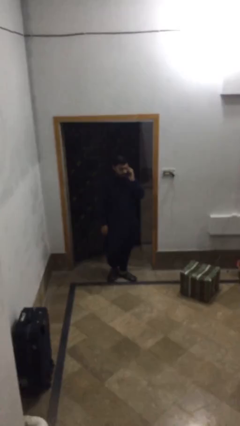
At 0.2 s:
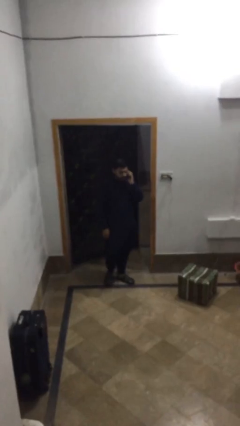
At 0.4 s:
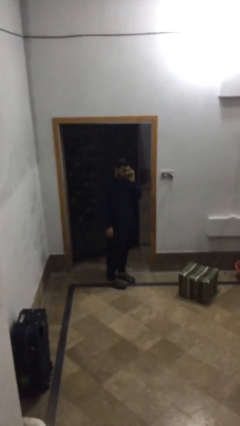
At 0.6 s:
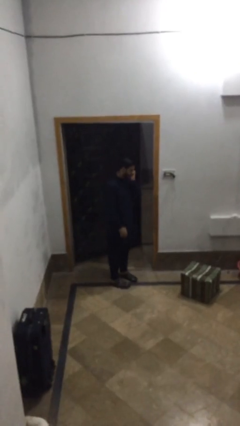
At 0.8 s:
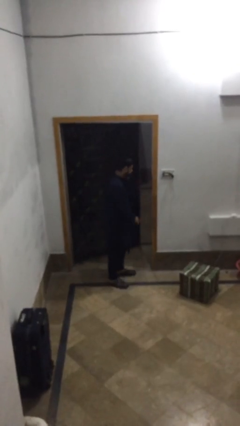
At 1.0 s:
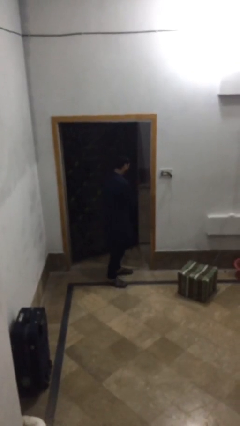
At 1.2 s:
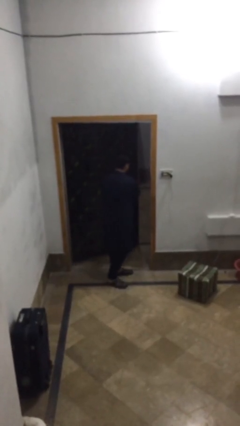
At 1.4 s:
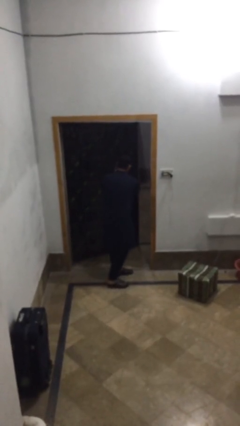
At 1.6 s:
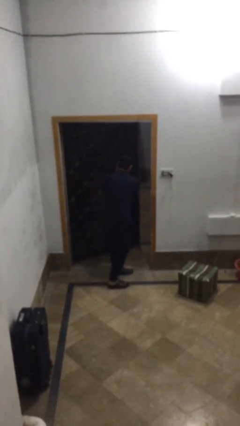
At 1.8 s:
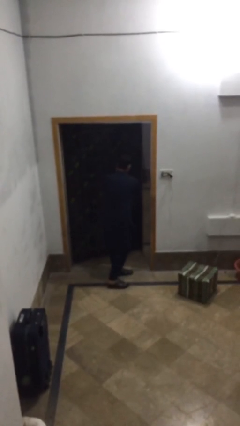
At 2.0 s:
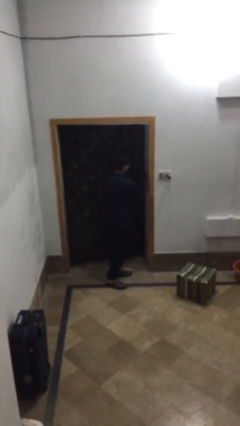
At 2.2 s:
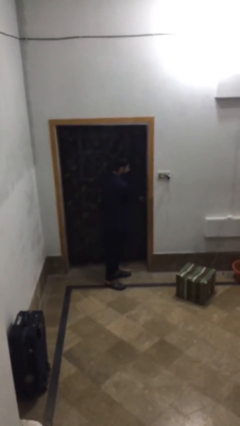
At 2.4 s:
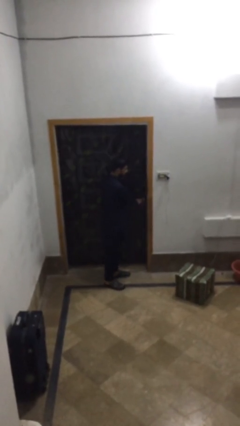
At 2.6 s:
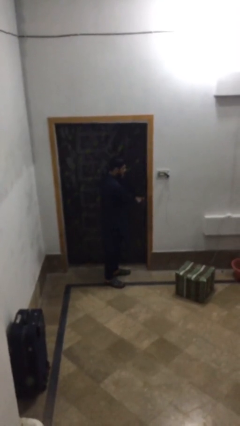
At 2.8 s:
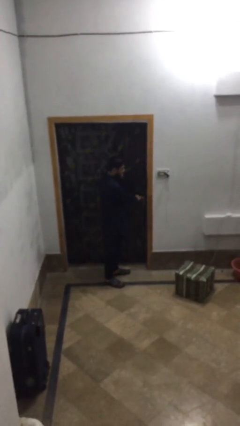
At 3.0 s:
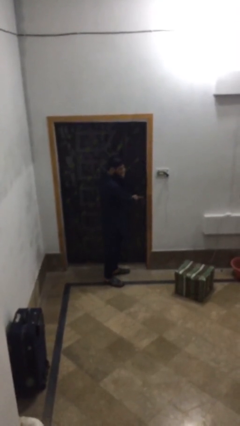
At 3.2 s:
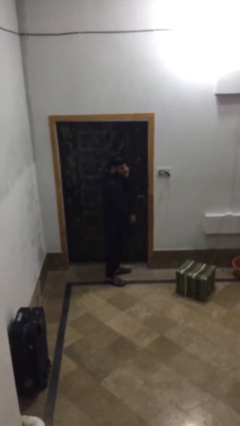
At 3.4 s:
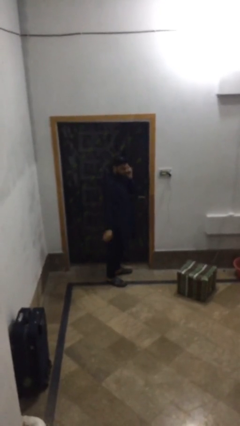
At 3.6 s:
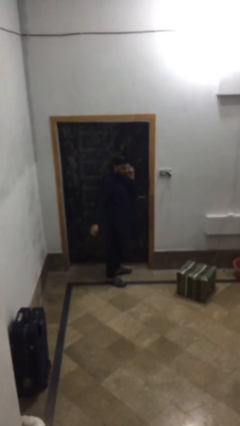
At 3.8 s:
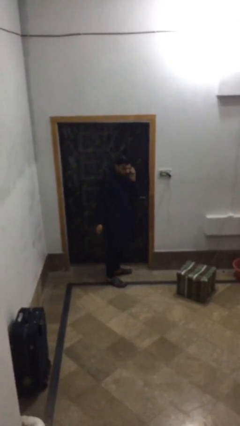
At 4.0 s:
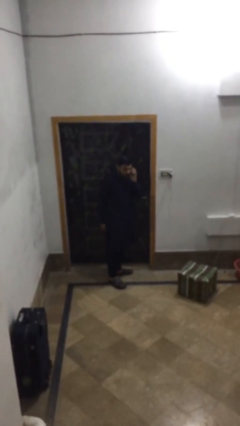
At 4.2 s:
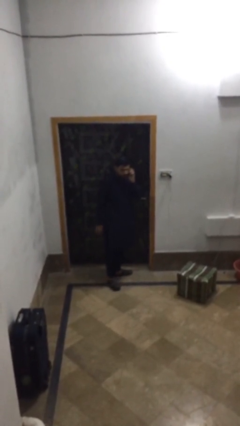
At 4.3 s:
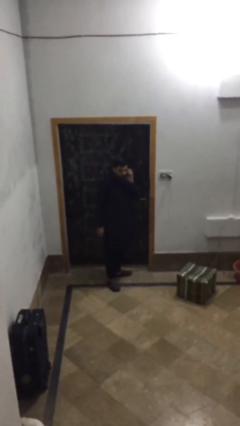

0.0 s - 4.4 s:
person closes facility door

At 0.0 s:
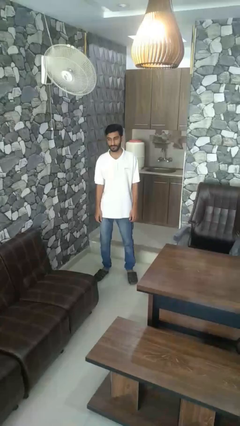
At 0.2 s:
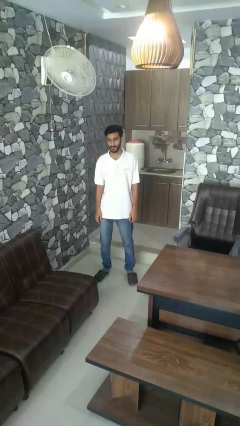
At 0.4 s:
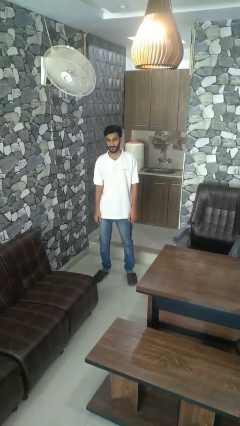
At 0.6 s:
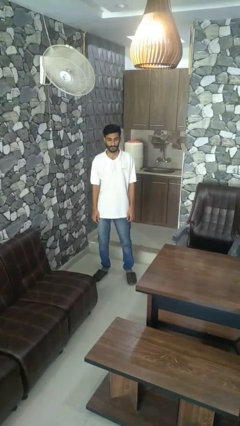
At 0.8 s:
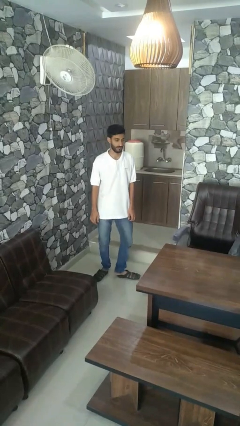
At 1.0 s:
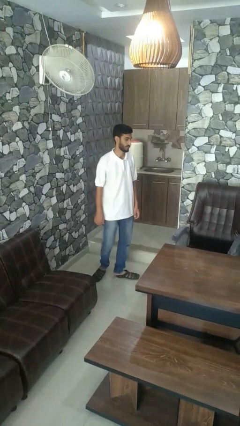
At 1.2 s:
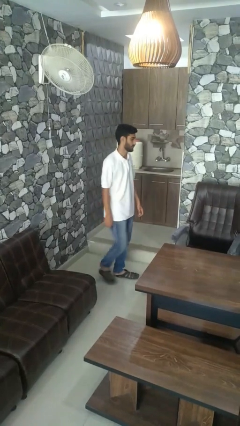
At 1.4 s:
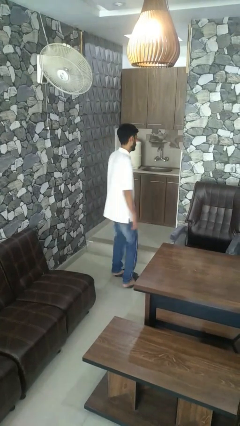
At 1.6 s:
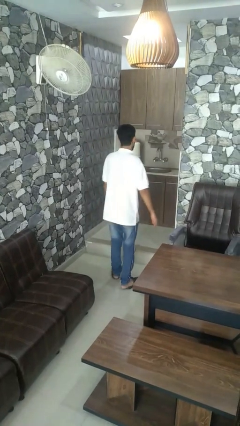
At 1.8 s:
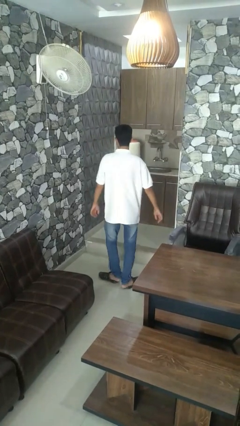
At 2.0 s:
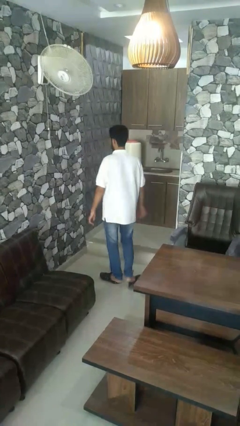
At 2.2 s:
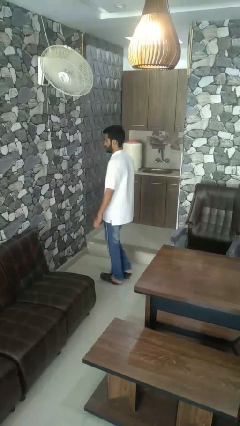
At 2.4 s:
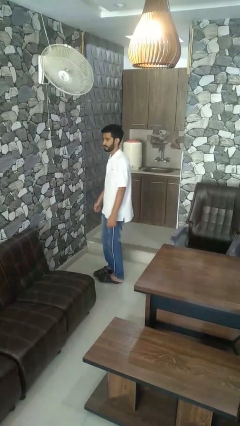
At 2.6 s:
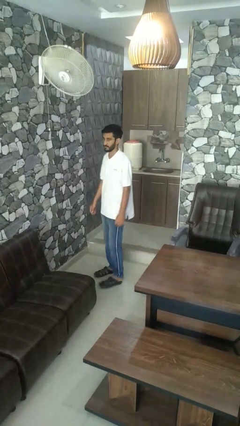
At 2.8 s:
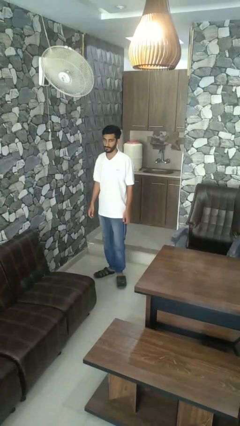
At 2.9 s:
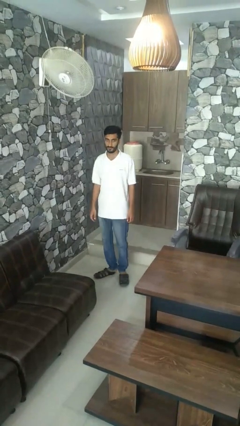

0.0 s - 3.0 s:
person twirls

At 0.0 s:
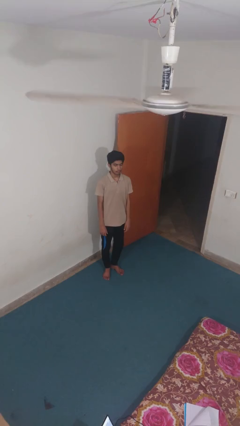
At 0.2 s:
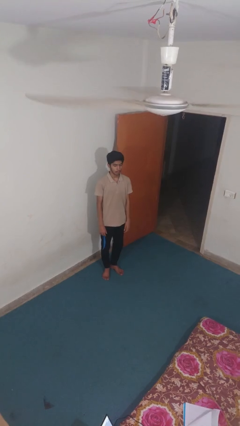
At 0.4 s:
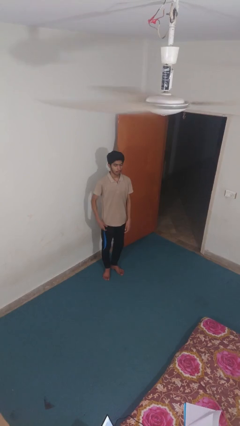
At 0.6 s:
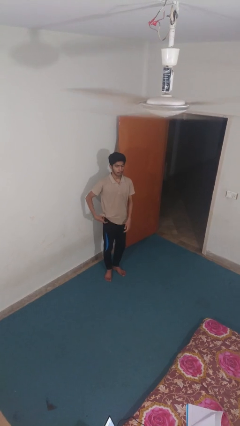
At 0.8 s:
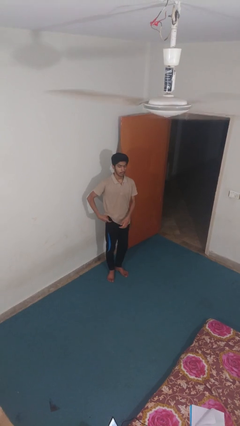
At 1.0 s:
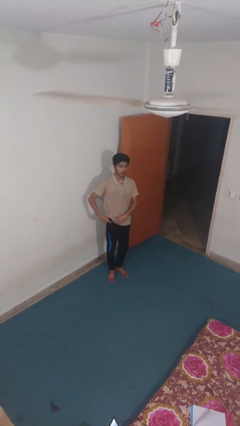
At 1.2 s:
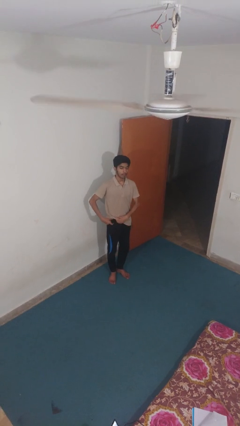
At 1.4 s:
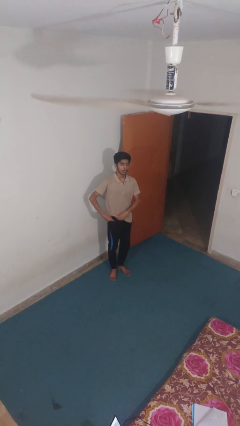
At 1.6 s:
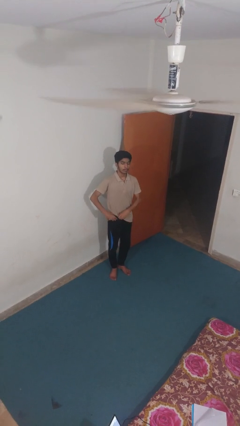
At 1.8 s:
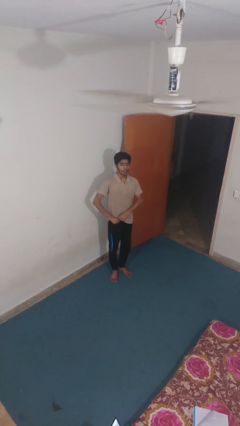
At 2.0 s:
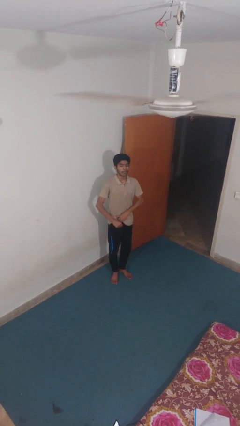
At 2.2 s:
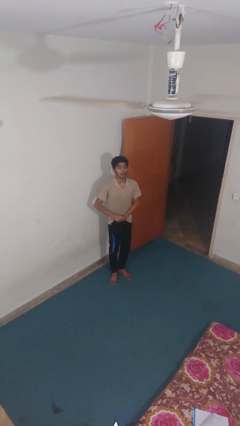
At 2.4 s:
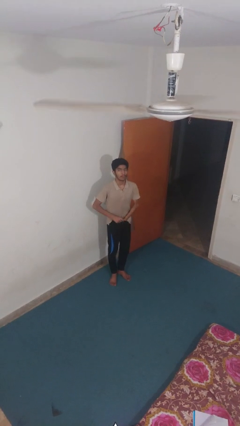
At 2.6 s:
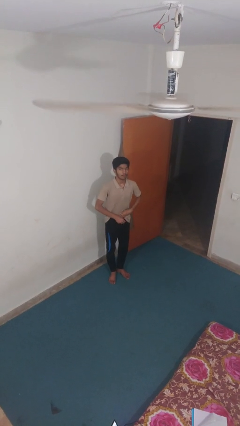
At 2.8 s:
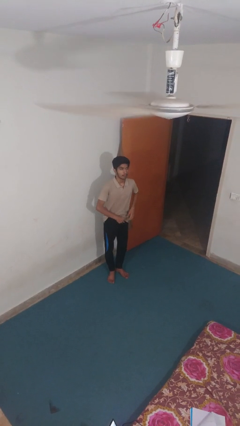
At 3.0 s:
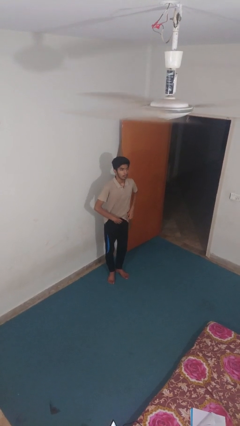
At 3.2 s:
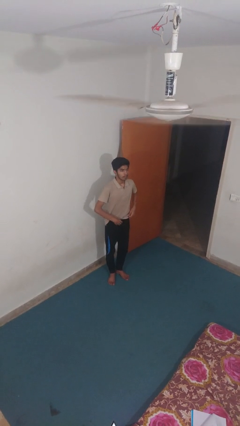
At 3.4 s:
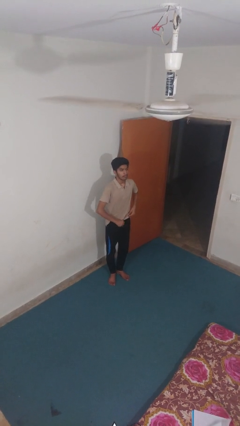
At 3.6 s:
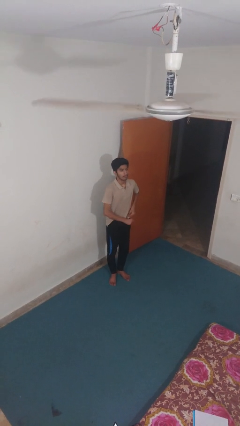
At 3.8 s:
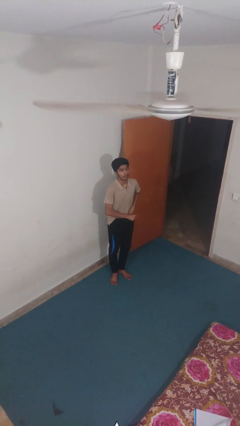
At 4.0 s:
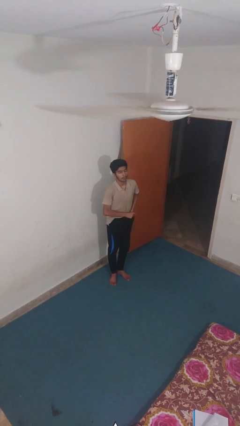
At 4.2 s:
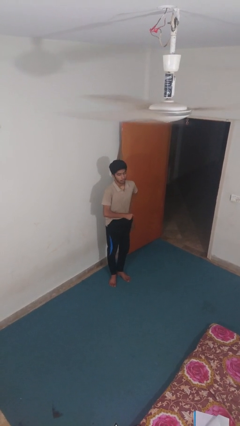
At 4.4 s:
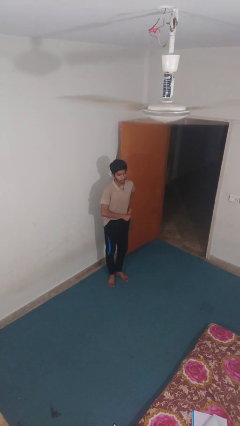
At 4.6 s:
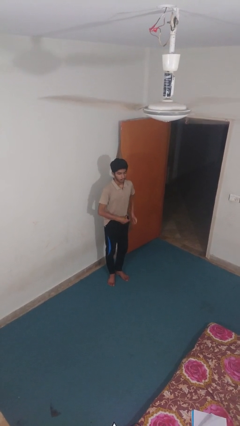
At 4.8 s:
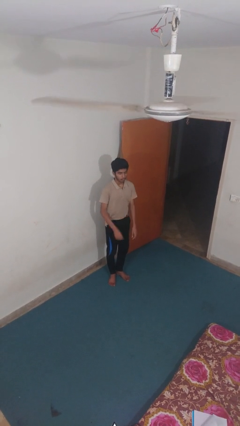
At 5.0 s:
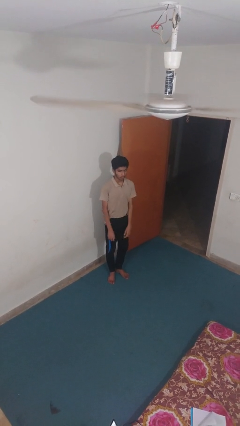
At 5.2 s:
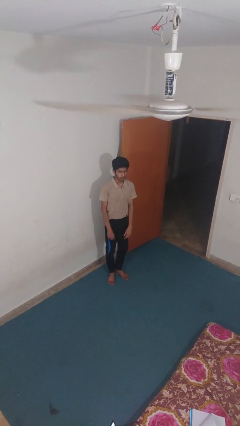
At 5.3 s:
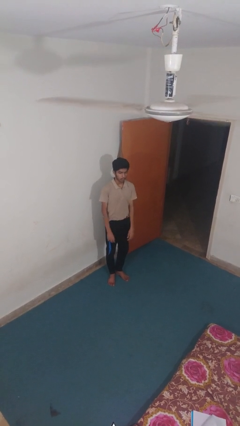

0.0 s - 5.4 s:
person tucks in shirt

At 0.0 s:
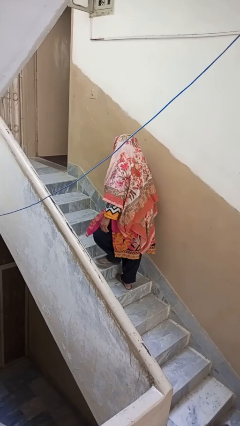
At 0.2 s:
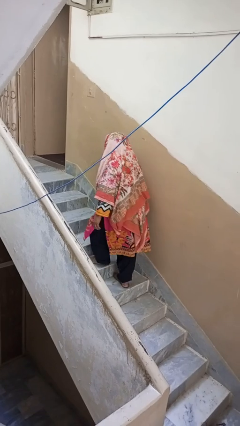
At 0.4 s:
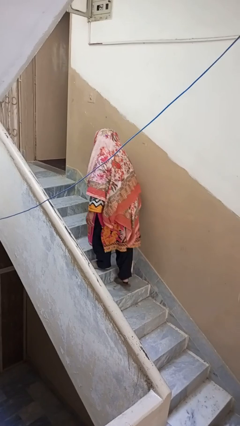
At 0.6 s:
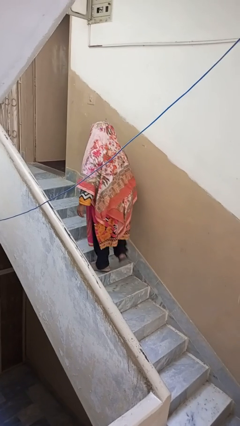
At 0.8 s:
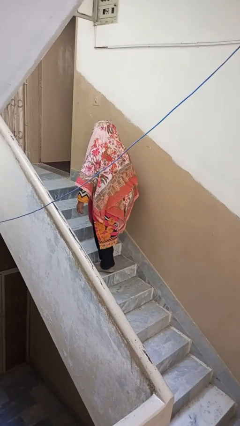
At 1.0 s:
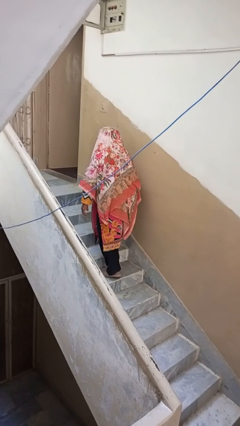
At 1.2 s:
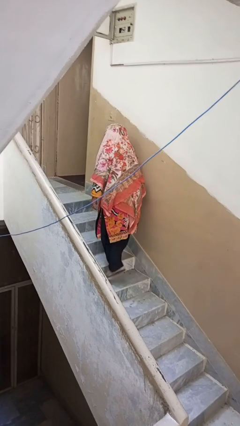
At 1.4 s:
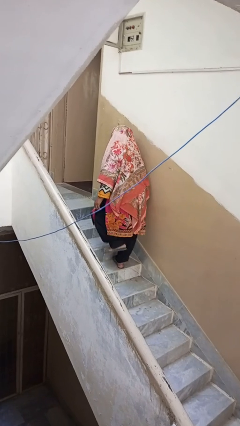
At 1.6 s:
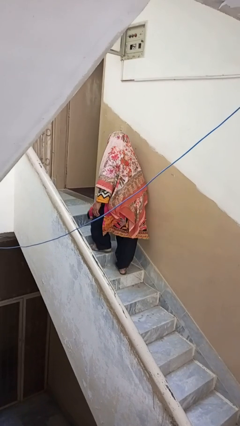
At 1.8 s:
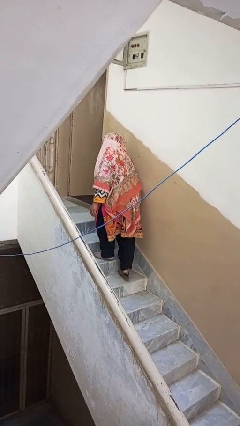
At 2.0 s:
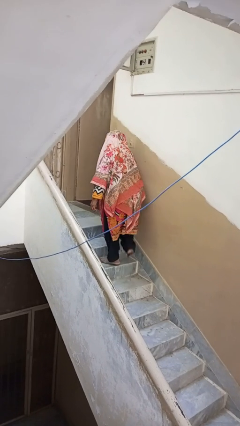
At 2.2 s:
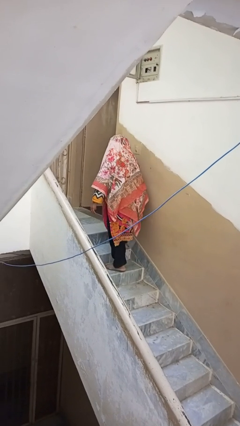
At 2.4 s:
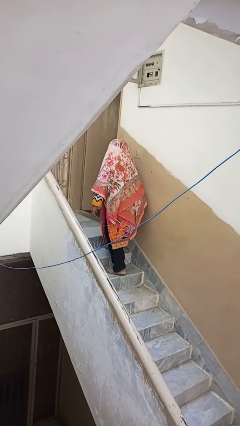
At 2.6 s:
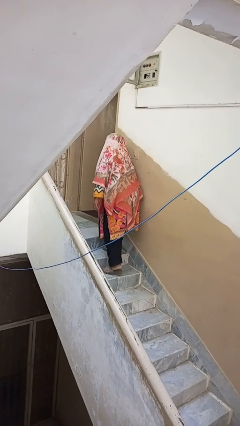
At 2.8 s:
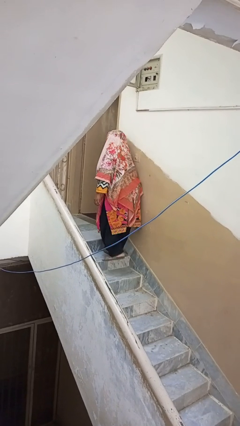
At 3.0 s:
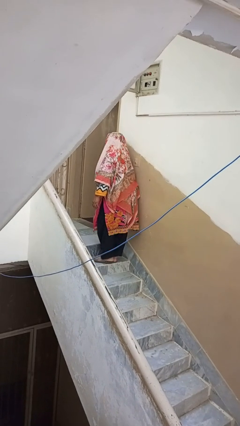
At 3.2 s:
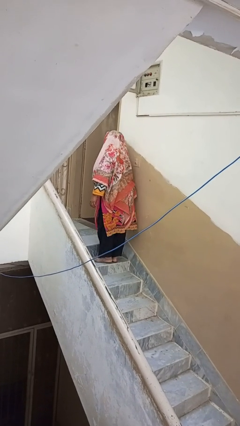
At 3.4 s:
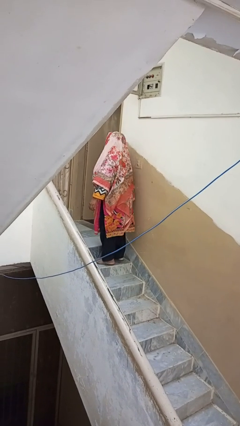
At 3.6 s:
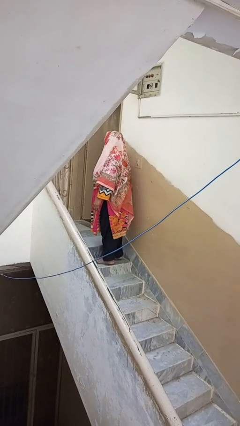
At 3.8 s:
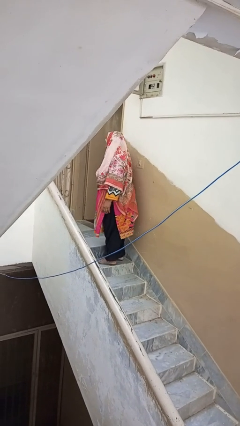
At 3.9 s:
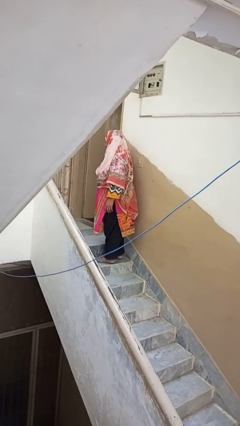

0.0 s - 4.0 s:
person climbs up stairs

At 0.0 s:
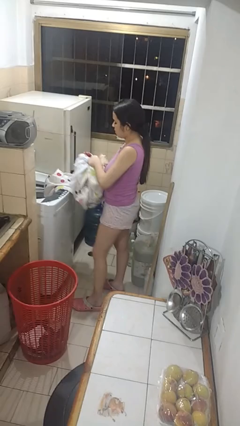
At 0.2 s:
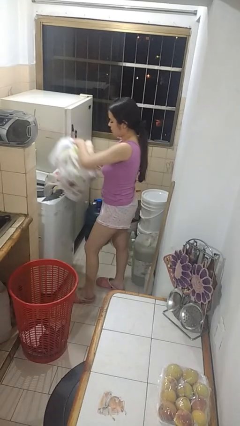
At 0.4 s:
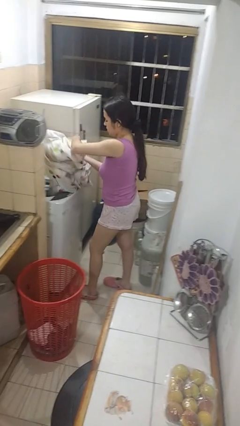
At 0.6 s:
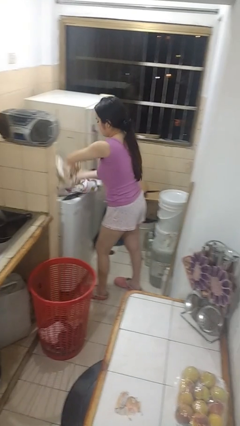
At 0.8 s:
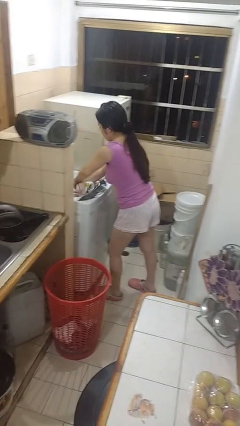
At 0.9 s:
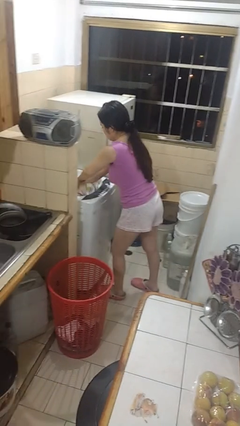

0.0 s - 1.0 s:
person loads clotheswasher
